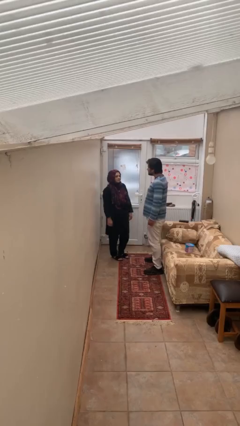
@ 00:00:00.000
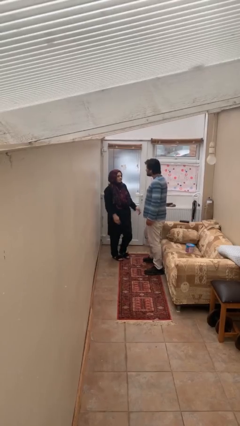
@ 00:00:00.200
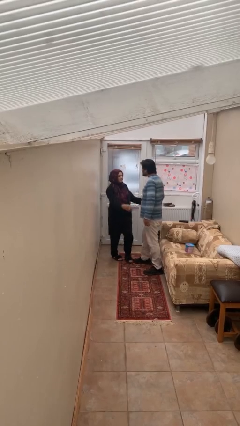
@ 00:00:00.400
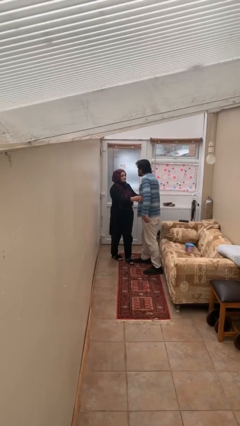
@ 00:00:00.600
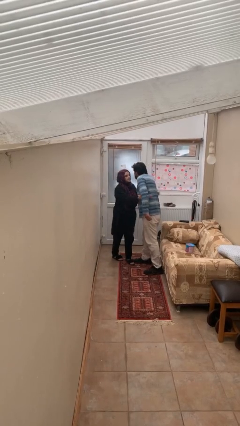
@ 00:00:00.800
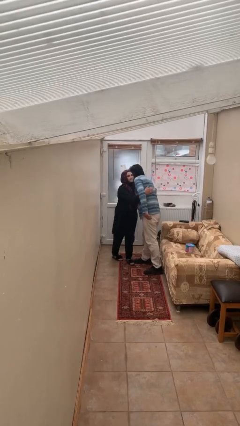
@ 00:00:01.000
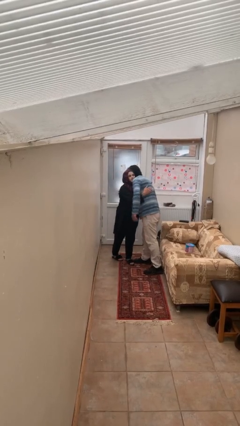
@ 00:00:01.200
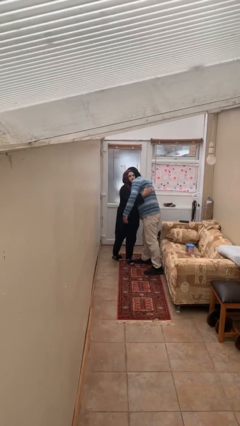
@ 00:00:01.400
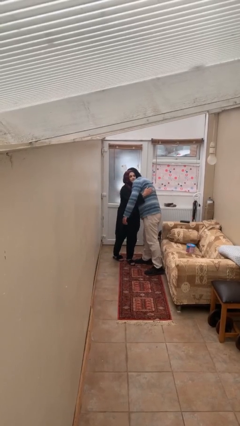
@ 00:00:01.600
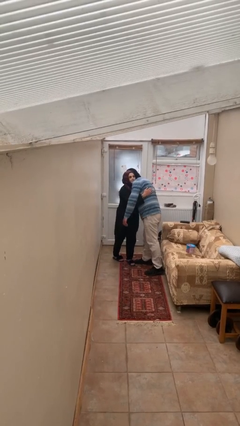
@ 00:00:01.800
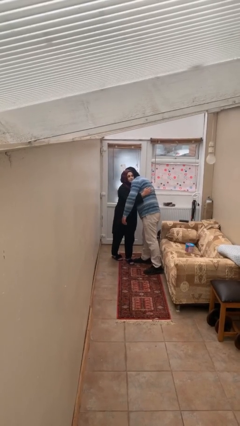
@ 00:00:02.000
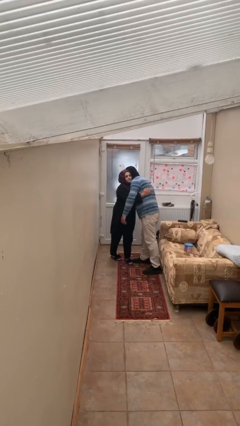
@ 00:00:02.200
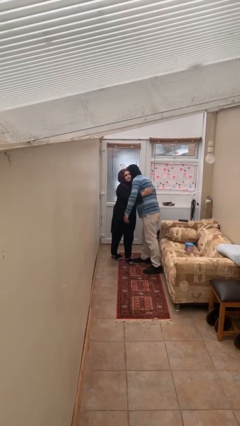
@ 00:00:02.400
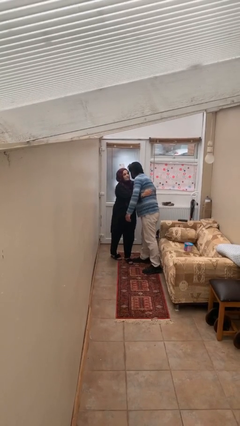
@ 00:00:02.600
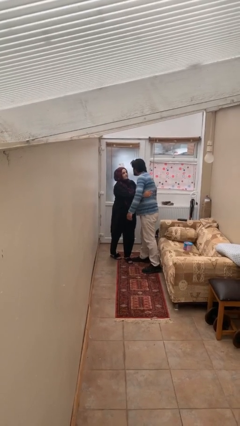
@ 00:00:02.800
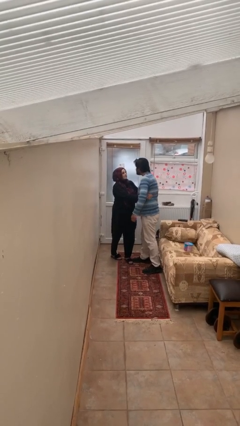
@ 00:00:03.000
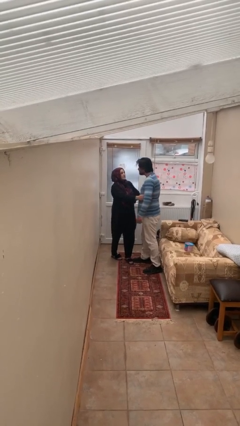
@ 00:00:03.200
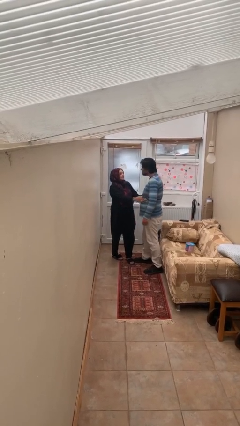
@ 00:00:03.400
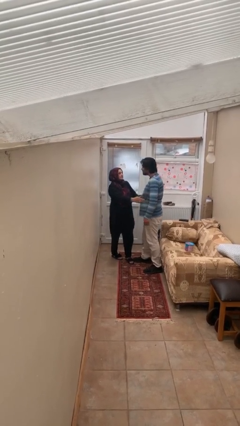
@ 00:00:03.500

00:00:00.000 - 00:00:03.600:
person embraces person

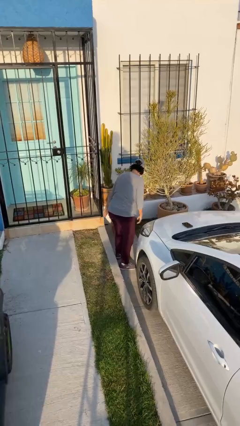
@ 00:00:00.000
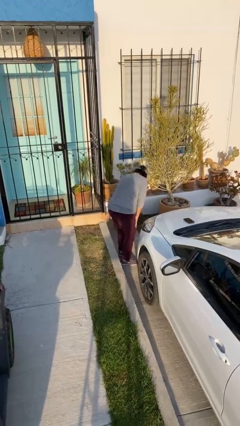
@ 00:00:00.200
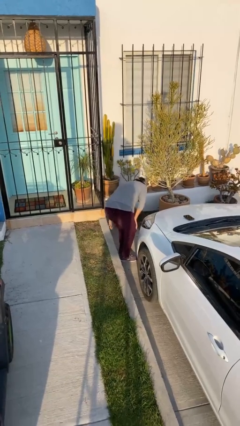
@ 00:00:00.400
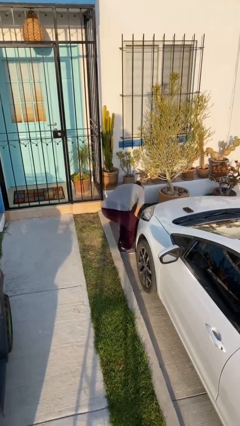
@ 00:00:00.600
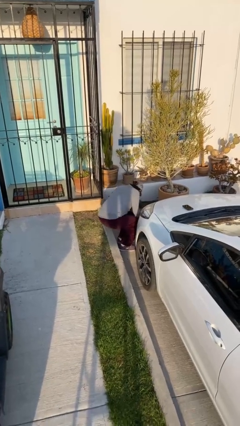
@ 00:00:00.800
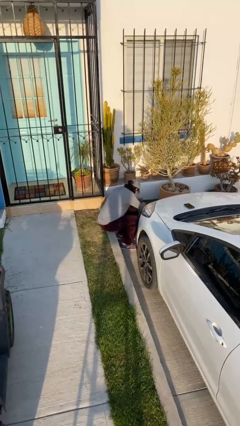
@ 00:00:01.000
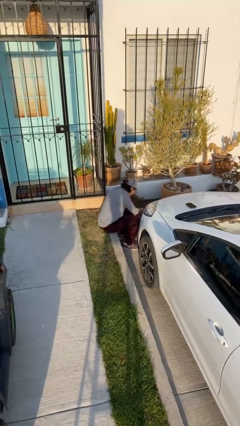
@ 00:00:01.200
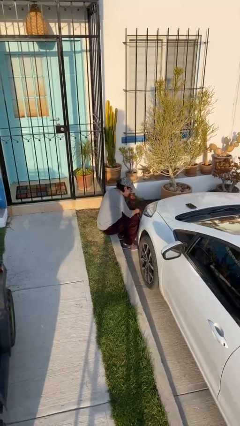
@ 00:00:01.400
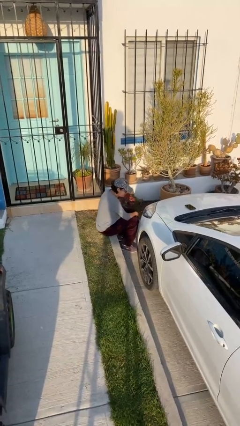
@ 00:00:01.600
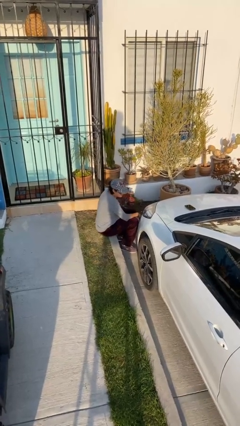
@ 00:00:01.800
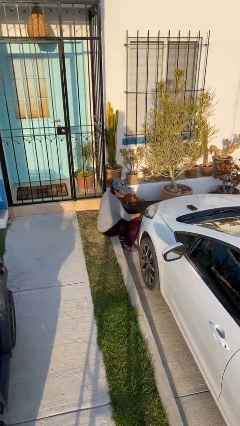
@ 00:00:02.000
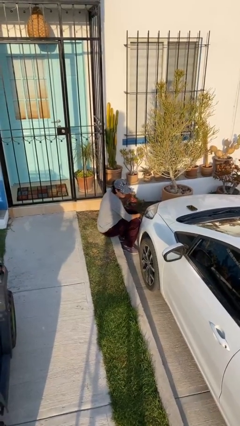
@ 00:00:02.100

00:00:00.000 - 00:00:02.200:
person sits down

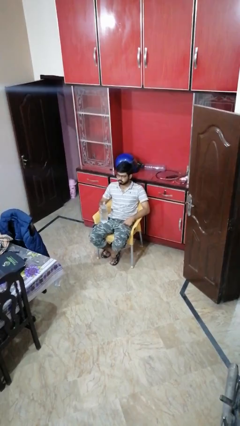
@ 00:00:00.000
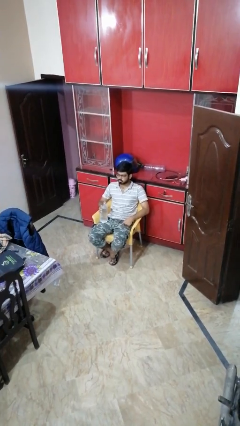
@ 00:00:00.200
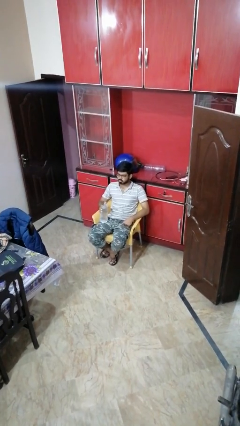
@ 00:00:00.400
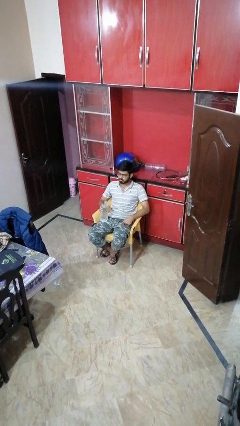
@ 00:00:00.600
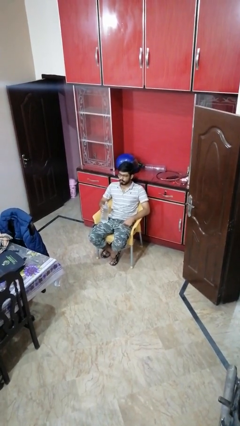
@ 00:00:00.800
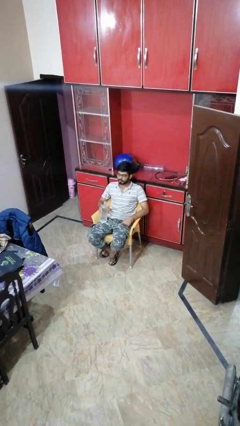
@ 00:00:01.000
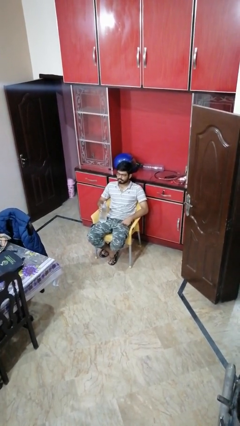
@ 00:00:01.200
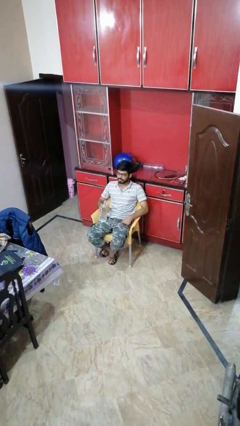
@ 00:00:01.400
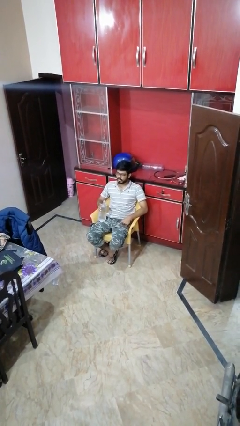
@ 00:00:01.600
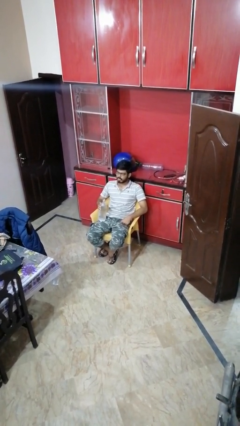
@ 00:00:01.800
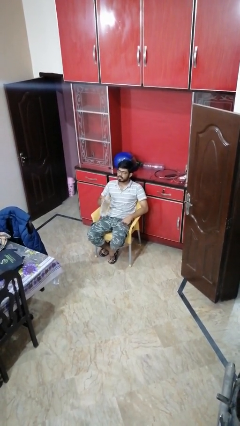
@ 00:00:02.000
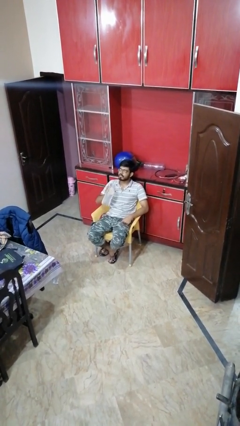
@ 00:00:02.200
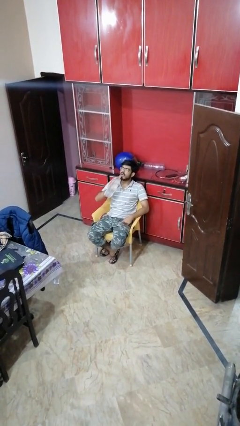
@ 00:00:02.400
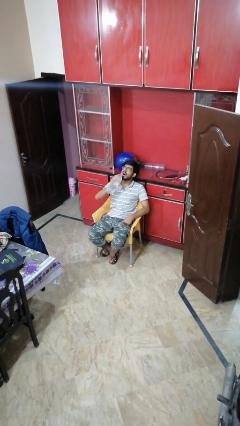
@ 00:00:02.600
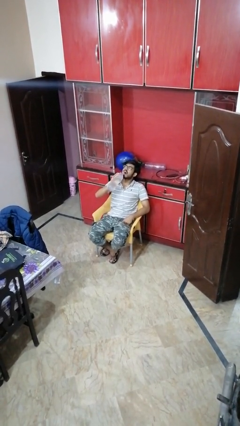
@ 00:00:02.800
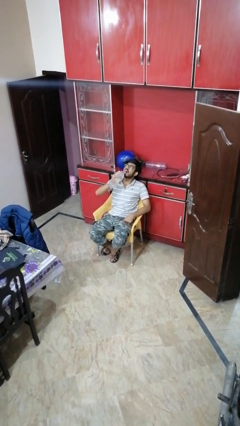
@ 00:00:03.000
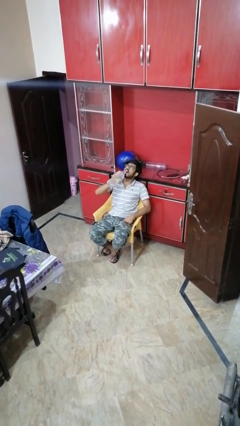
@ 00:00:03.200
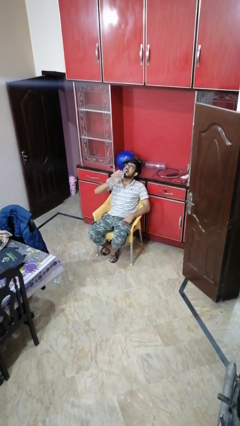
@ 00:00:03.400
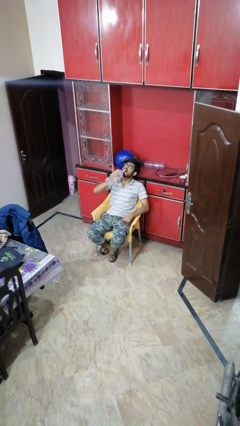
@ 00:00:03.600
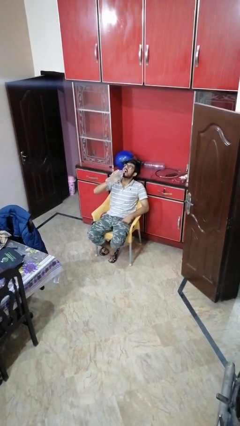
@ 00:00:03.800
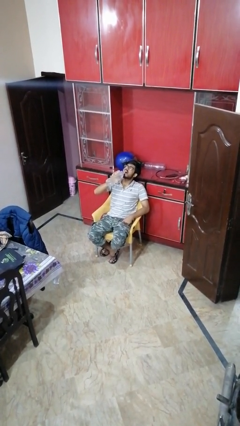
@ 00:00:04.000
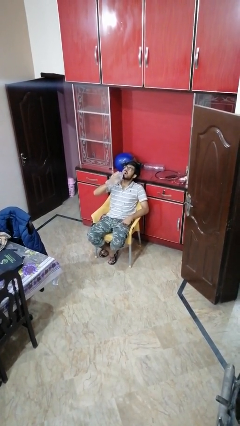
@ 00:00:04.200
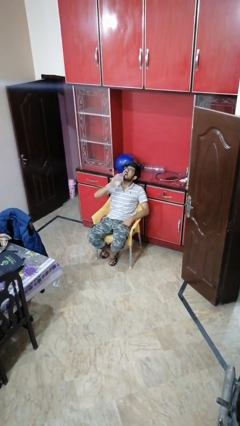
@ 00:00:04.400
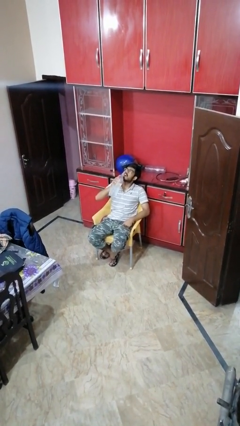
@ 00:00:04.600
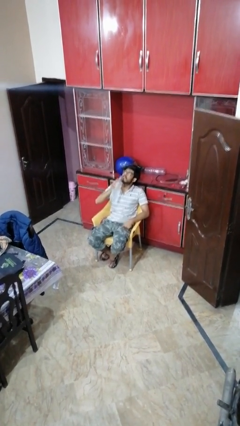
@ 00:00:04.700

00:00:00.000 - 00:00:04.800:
person drinks from bottle

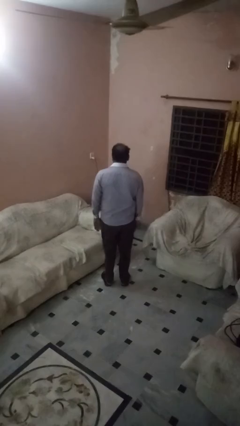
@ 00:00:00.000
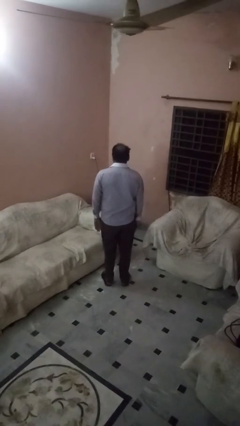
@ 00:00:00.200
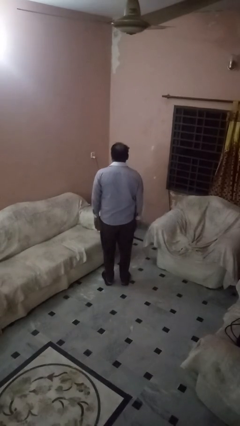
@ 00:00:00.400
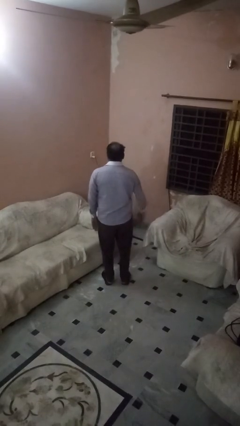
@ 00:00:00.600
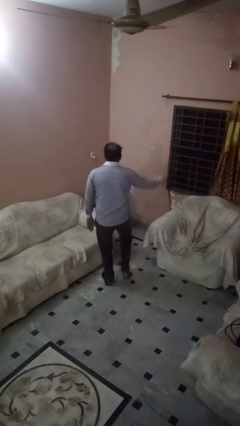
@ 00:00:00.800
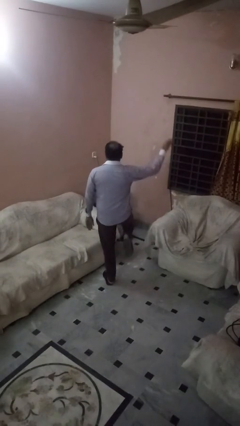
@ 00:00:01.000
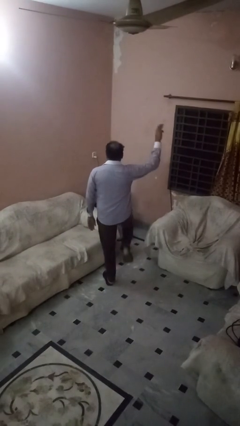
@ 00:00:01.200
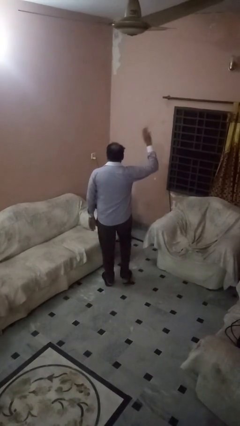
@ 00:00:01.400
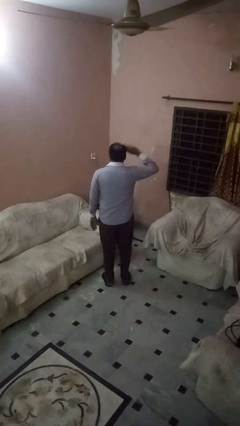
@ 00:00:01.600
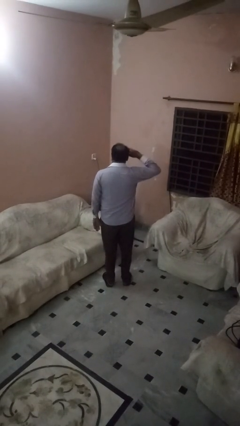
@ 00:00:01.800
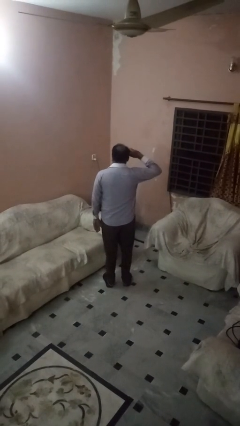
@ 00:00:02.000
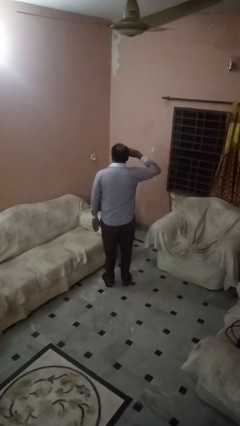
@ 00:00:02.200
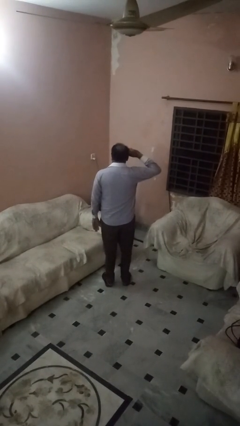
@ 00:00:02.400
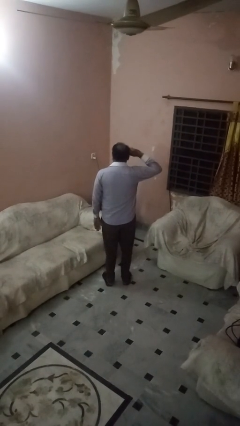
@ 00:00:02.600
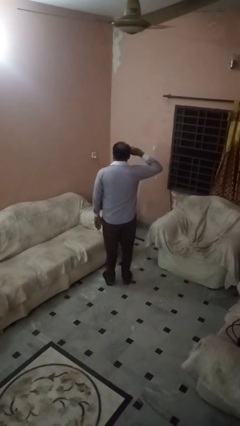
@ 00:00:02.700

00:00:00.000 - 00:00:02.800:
person salutes

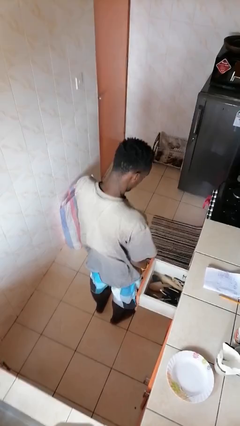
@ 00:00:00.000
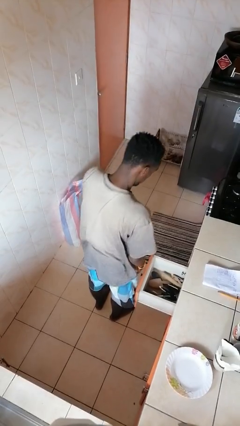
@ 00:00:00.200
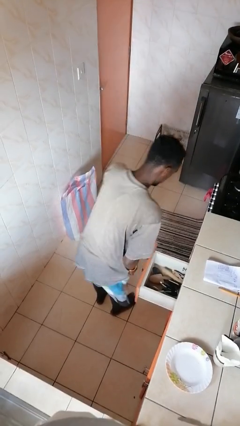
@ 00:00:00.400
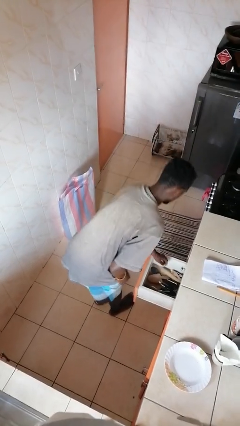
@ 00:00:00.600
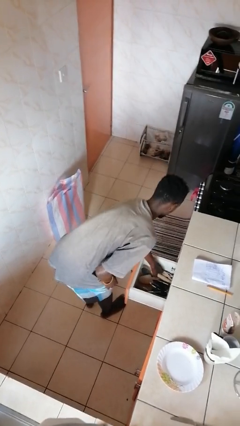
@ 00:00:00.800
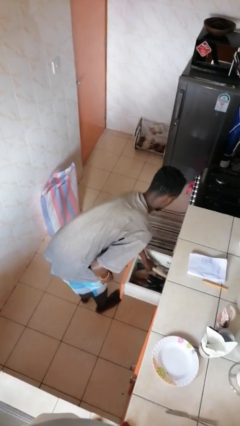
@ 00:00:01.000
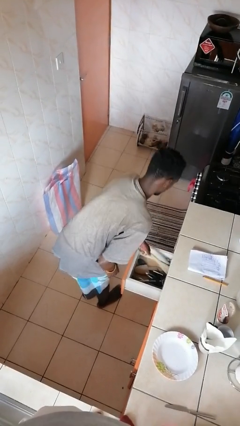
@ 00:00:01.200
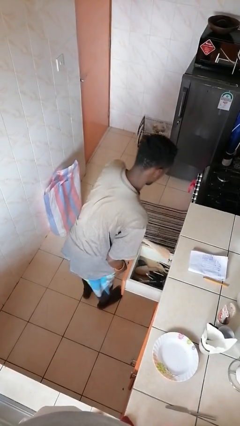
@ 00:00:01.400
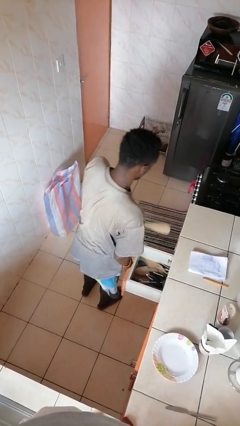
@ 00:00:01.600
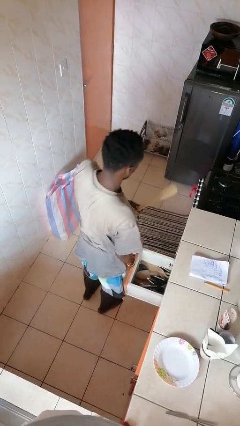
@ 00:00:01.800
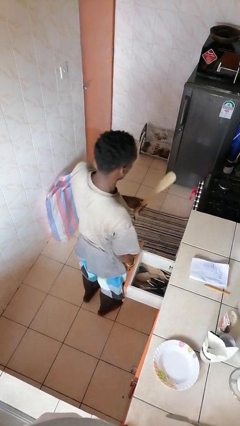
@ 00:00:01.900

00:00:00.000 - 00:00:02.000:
person takes object from kitchen drawer

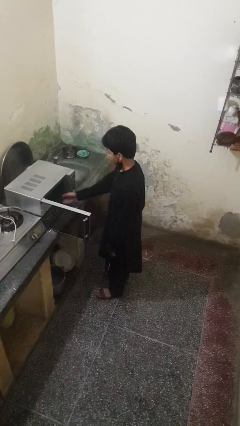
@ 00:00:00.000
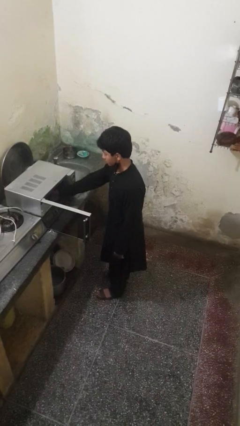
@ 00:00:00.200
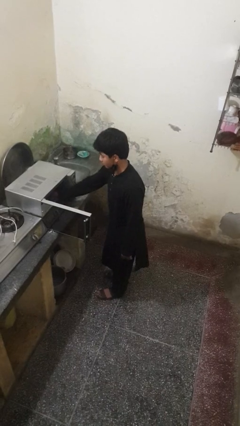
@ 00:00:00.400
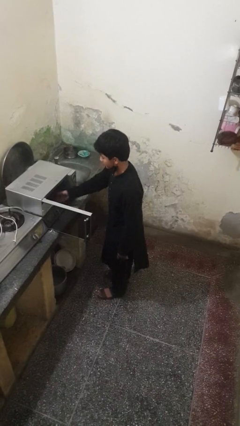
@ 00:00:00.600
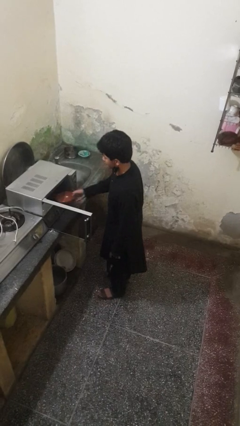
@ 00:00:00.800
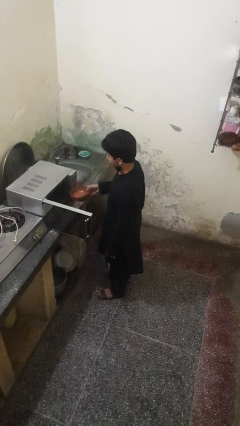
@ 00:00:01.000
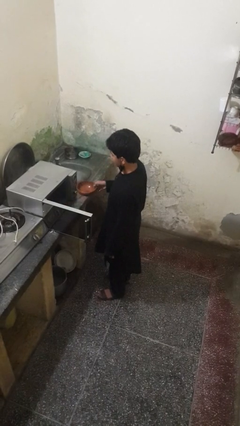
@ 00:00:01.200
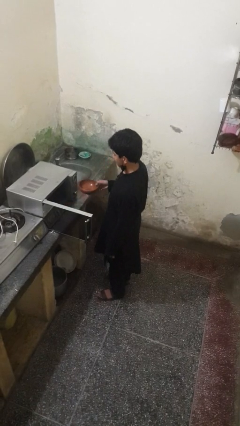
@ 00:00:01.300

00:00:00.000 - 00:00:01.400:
person takes object from microwave

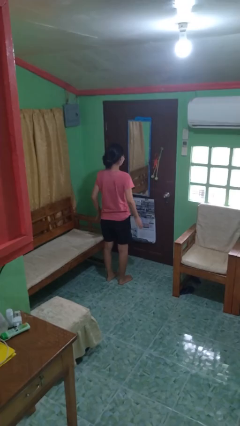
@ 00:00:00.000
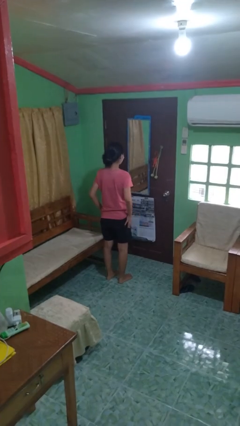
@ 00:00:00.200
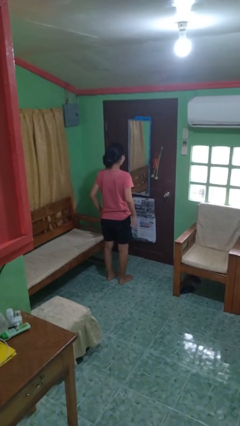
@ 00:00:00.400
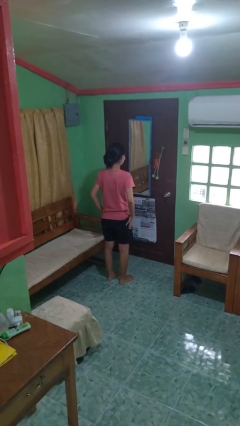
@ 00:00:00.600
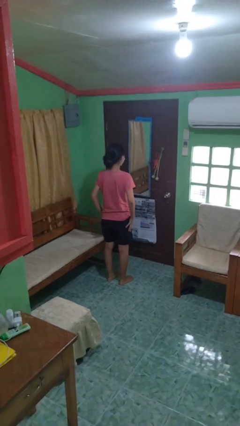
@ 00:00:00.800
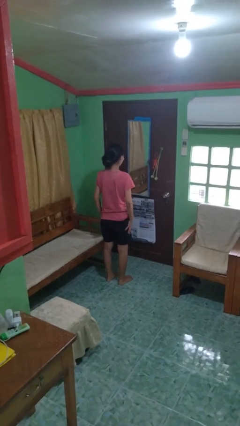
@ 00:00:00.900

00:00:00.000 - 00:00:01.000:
person slaps hands on thighs